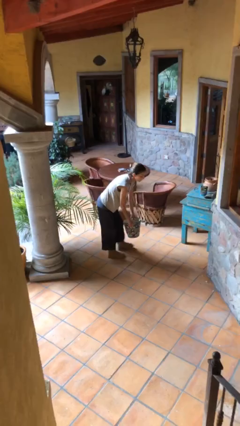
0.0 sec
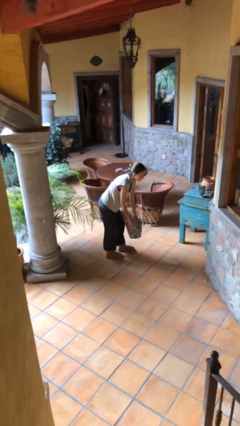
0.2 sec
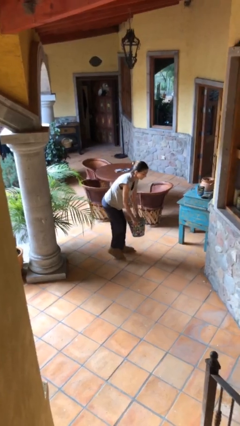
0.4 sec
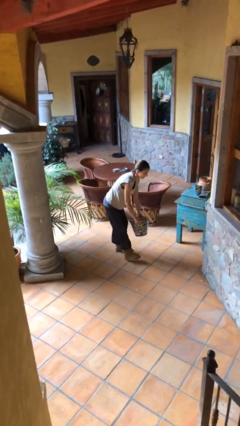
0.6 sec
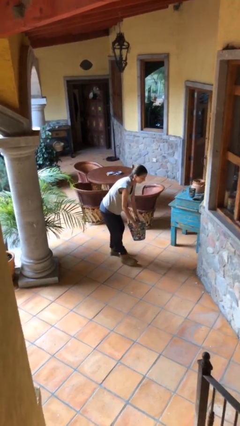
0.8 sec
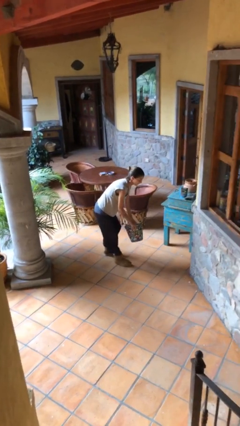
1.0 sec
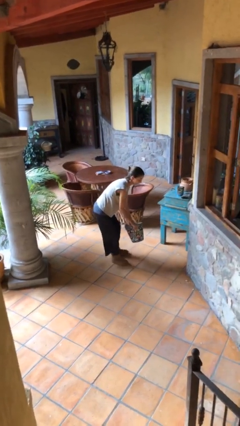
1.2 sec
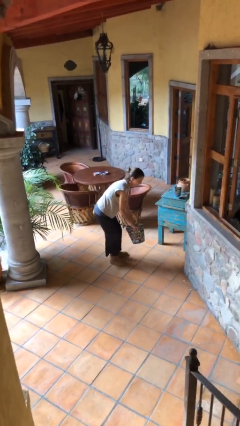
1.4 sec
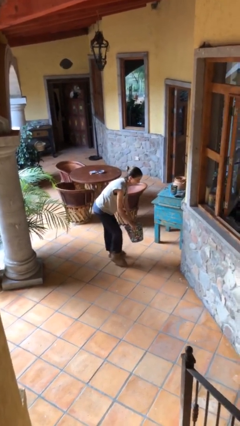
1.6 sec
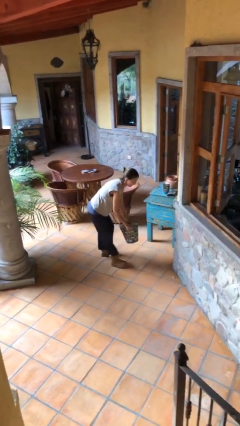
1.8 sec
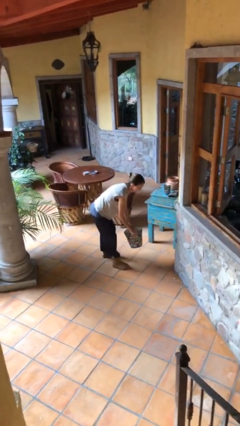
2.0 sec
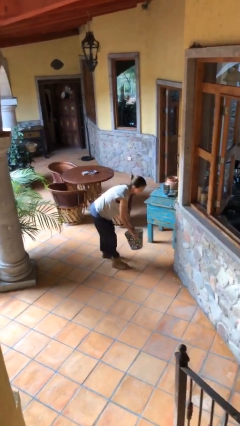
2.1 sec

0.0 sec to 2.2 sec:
person carries heavy object

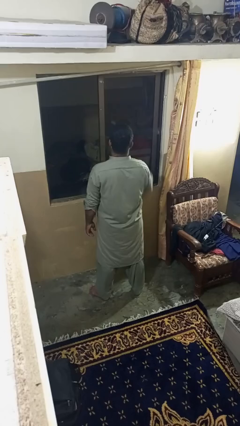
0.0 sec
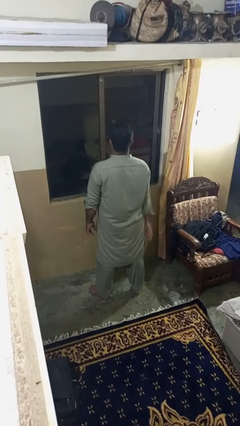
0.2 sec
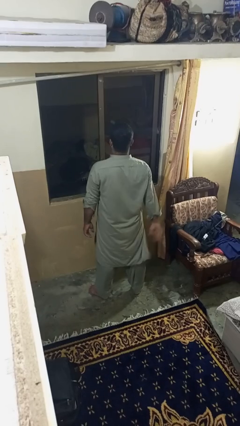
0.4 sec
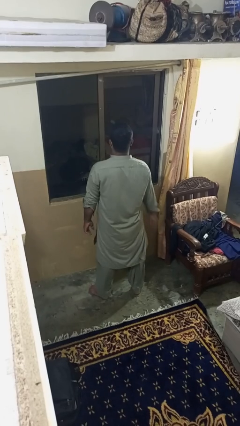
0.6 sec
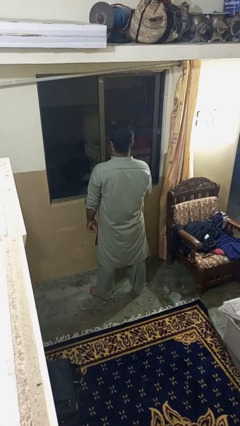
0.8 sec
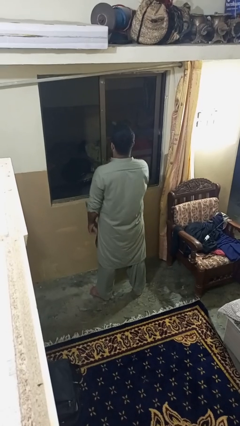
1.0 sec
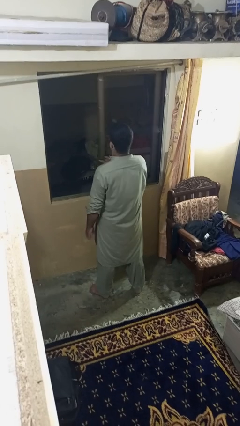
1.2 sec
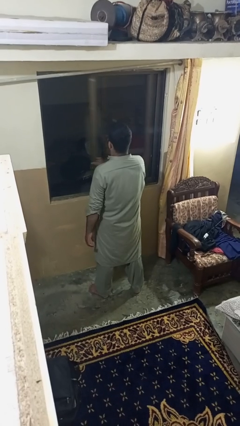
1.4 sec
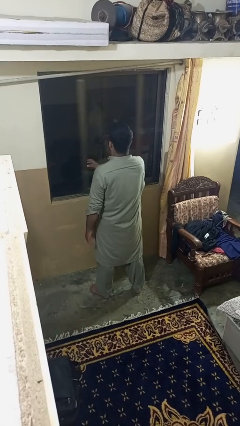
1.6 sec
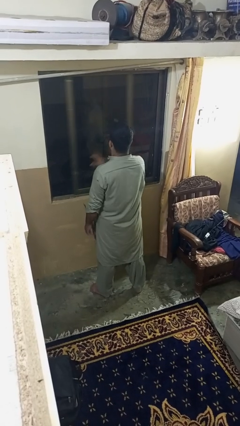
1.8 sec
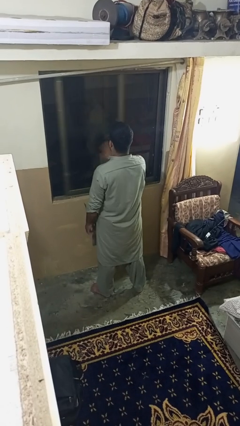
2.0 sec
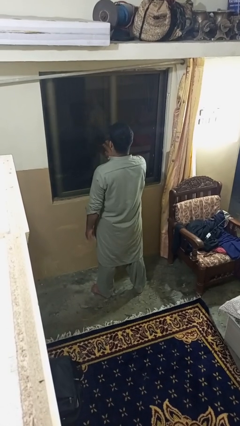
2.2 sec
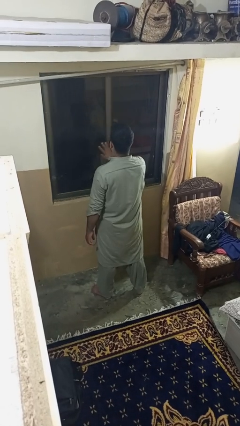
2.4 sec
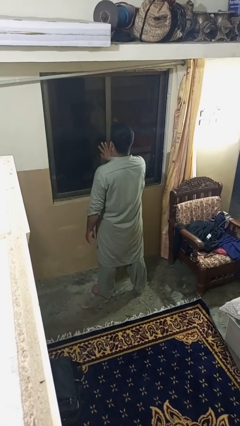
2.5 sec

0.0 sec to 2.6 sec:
person closes home window

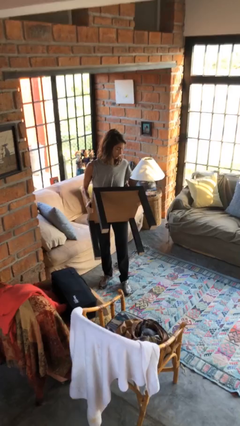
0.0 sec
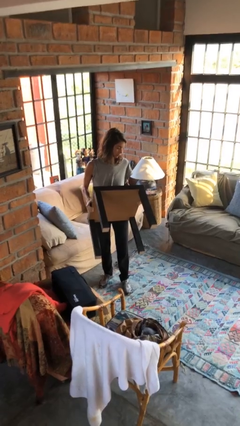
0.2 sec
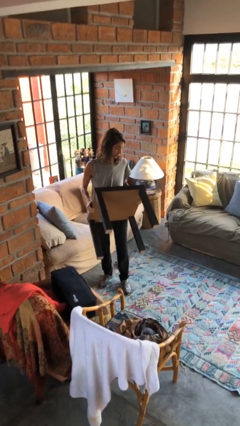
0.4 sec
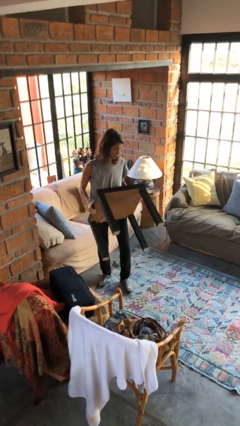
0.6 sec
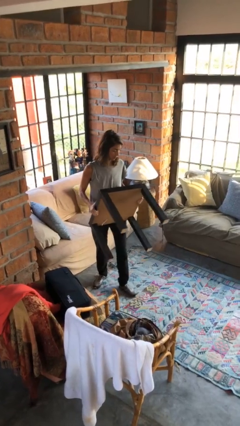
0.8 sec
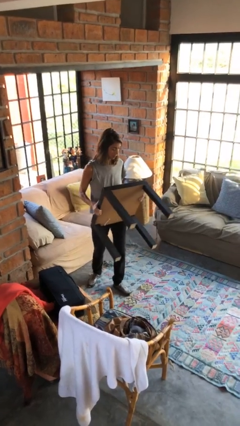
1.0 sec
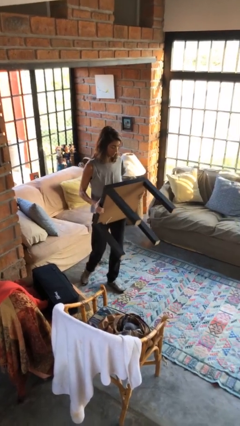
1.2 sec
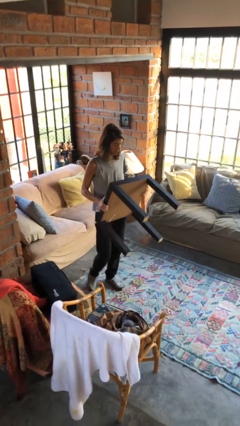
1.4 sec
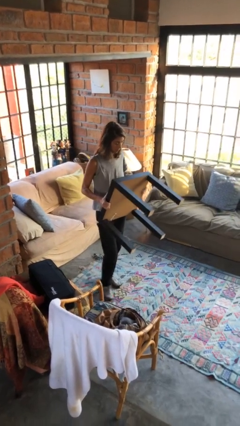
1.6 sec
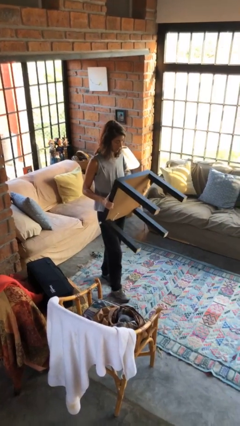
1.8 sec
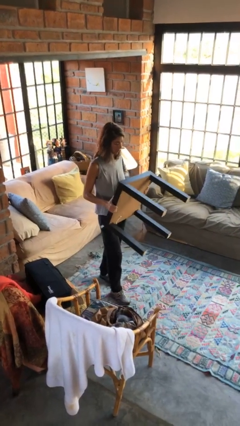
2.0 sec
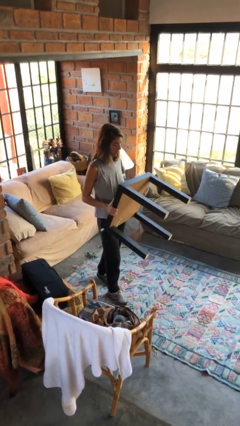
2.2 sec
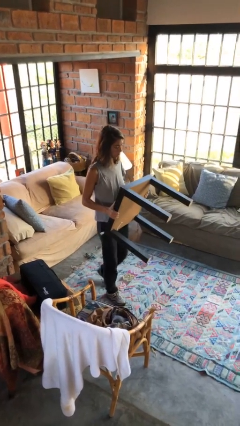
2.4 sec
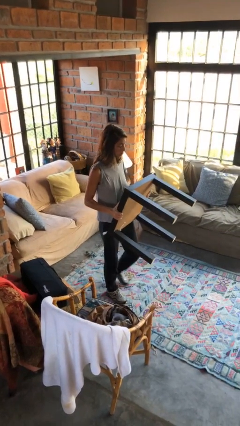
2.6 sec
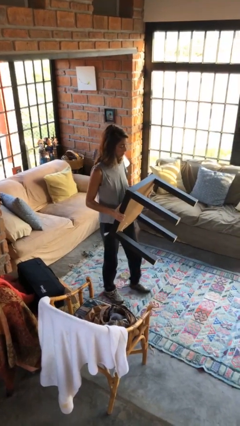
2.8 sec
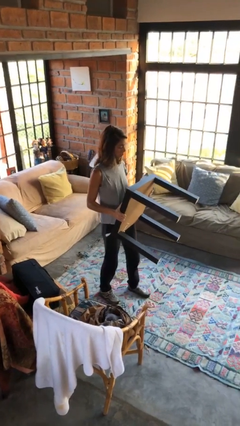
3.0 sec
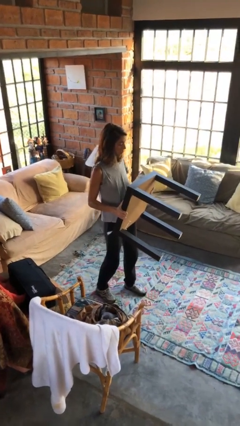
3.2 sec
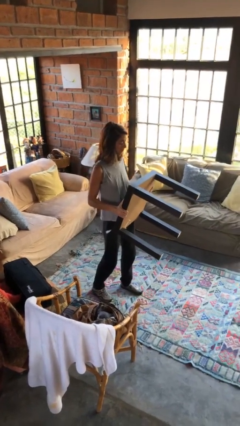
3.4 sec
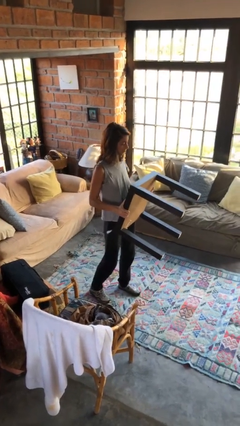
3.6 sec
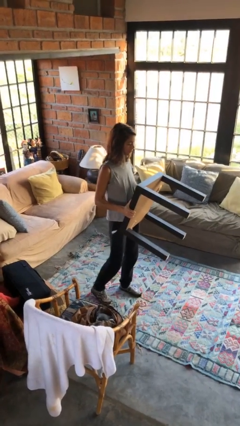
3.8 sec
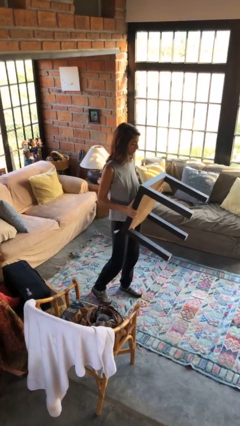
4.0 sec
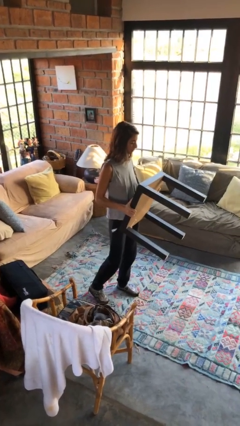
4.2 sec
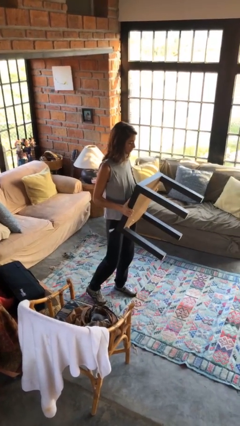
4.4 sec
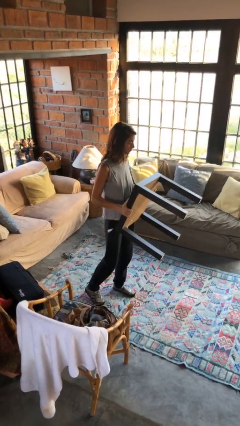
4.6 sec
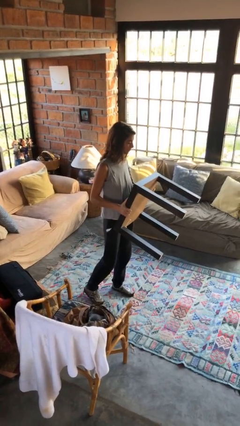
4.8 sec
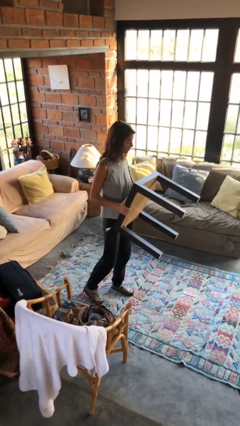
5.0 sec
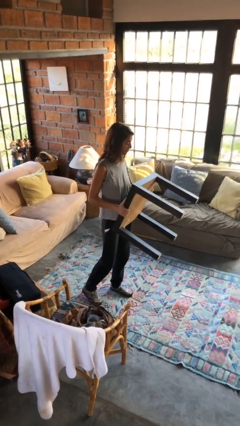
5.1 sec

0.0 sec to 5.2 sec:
person carries furniture

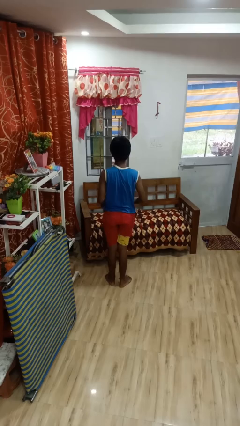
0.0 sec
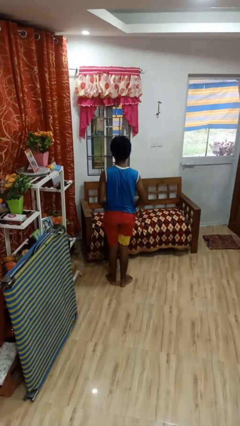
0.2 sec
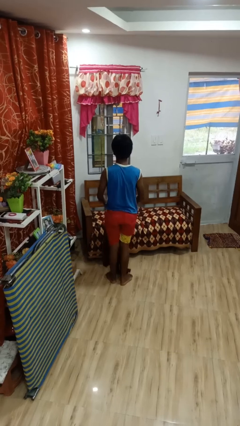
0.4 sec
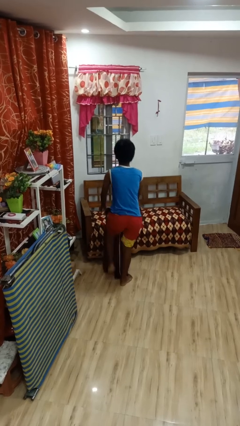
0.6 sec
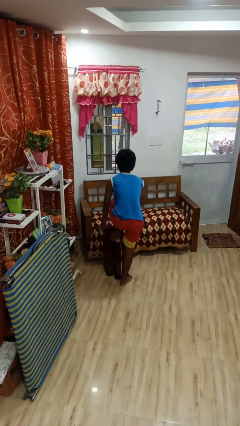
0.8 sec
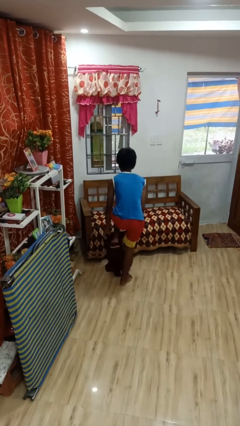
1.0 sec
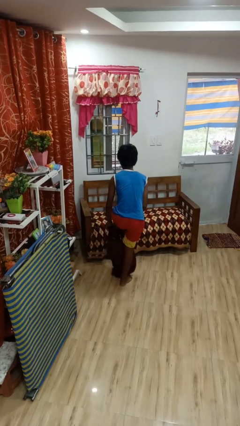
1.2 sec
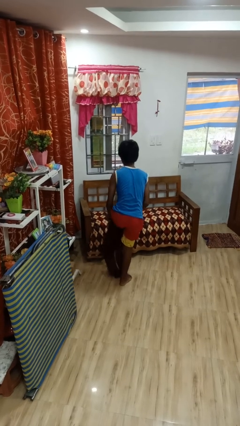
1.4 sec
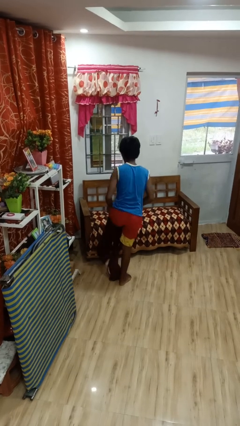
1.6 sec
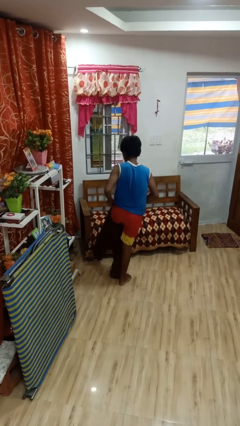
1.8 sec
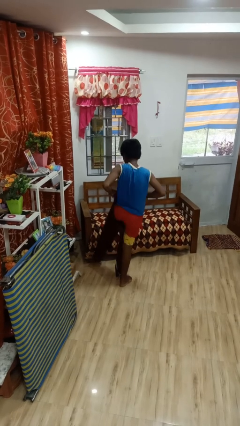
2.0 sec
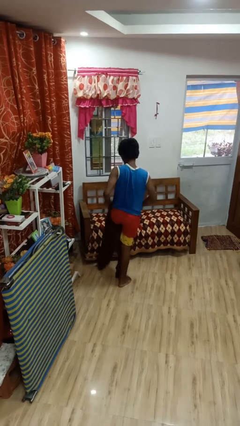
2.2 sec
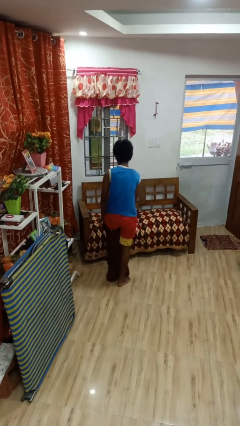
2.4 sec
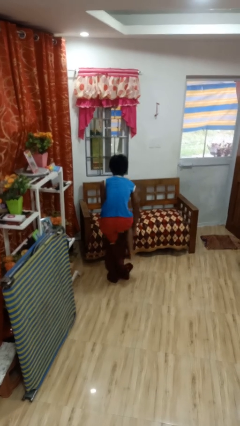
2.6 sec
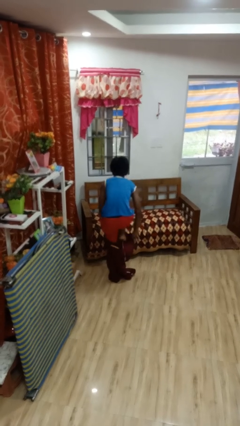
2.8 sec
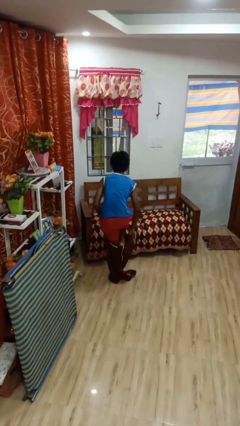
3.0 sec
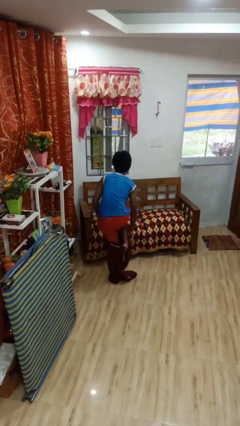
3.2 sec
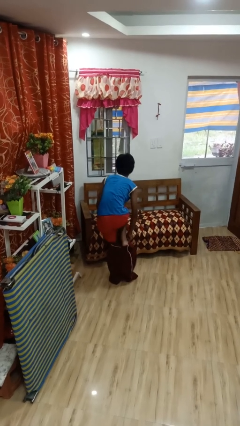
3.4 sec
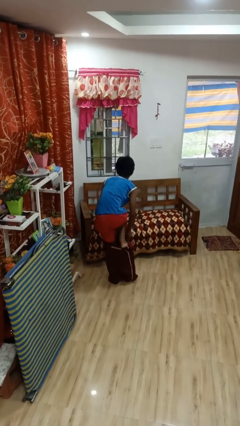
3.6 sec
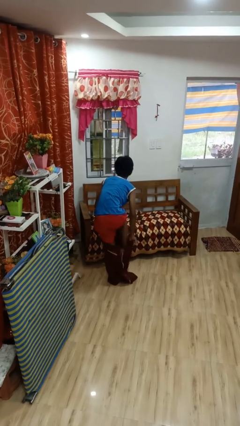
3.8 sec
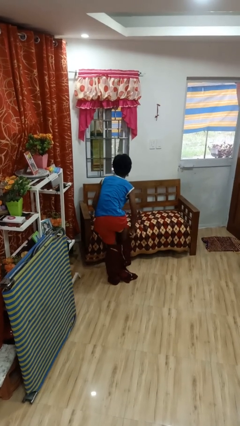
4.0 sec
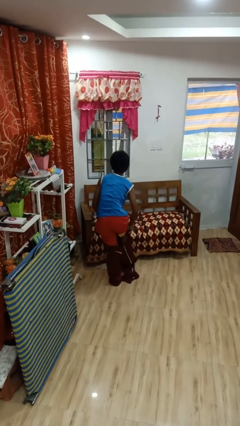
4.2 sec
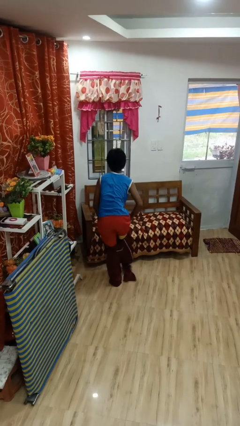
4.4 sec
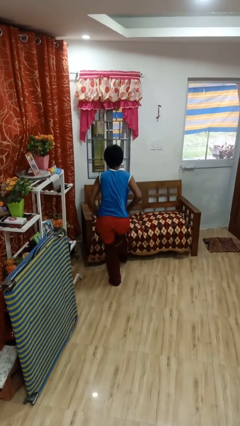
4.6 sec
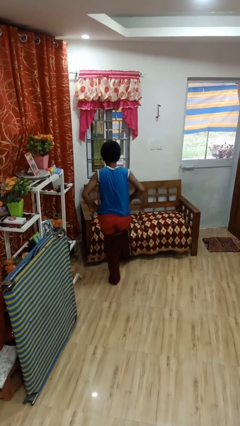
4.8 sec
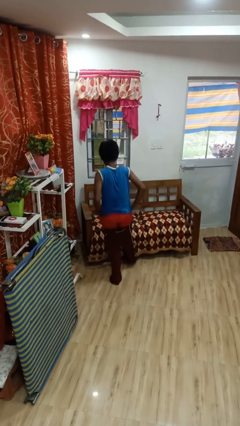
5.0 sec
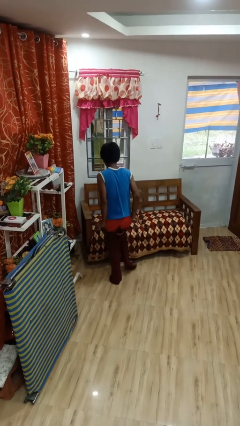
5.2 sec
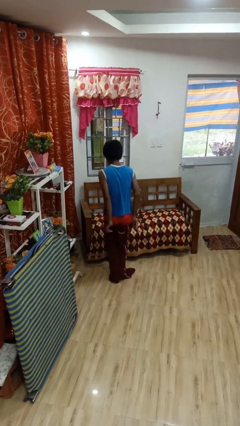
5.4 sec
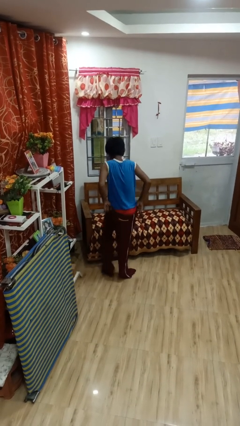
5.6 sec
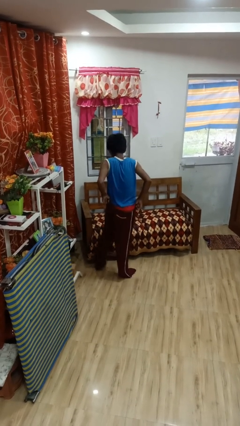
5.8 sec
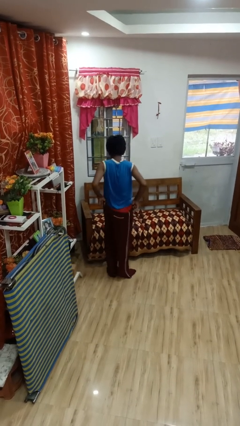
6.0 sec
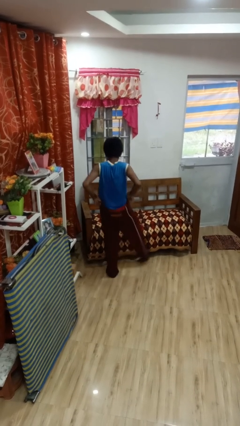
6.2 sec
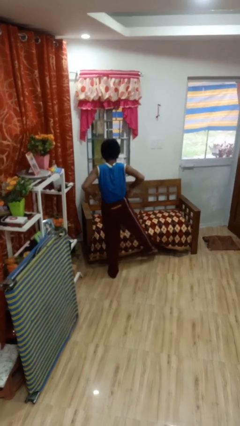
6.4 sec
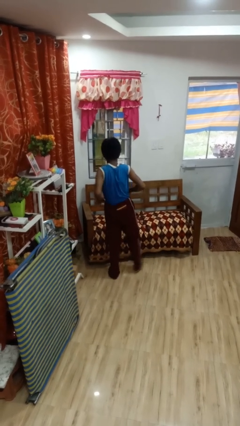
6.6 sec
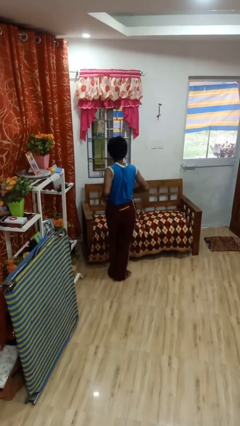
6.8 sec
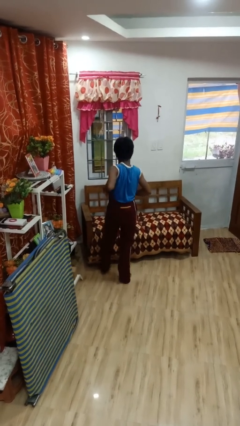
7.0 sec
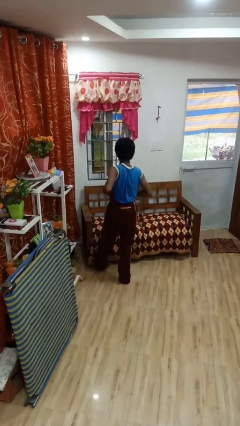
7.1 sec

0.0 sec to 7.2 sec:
person puts on pants

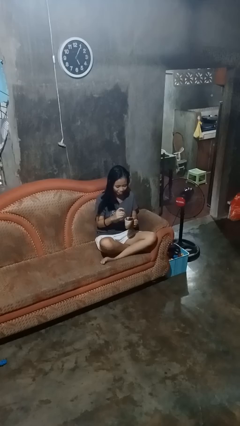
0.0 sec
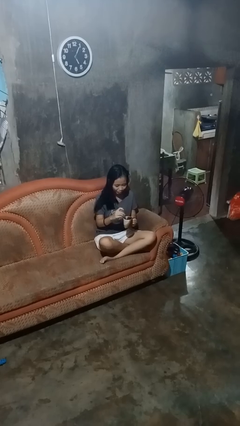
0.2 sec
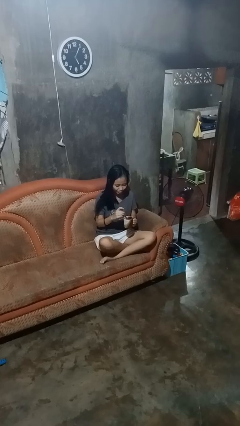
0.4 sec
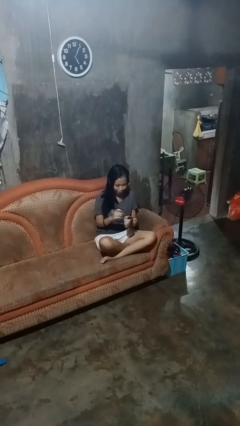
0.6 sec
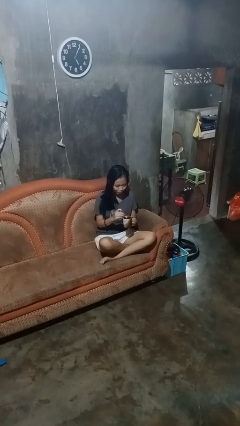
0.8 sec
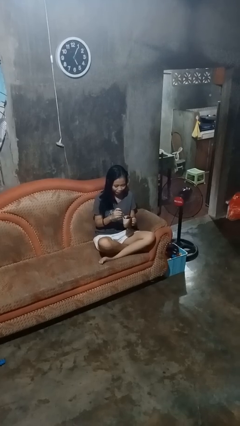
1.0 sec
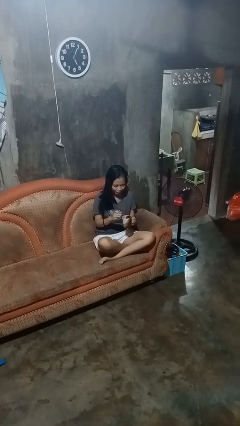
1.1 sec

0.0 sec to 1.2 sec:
person stirs mug
